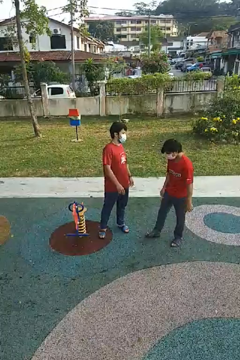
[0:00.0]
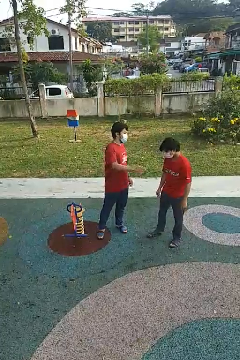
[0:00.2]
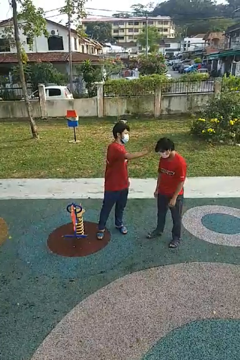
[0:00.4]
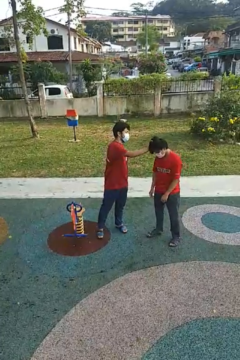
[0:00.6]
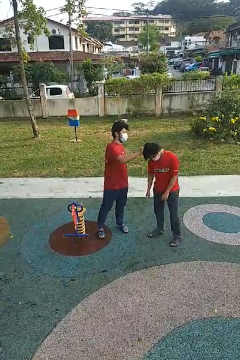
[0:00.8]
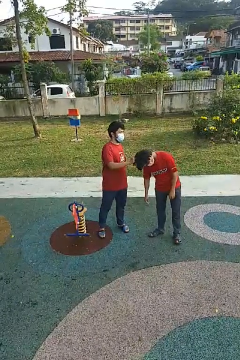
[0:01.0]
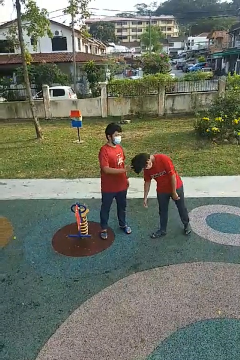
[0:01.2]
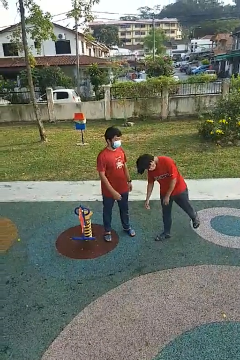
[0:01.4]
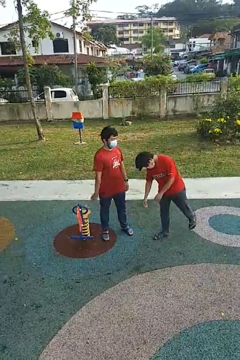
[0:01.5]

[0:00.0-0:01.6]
person grabs person by hair

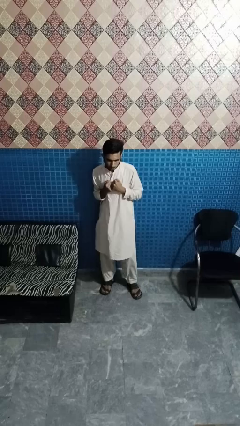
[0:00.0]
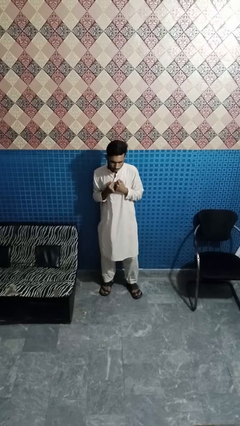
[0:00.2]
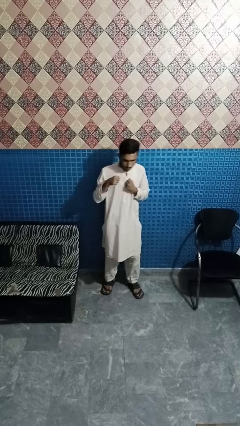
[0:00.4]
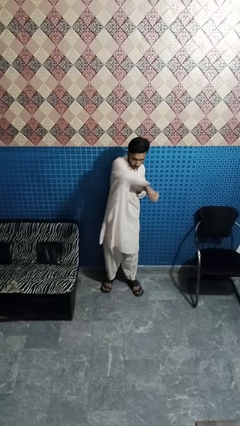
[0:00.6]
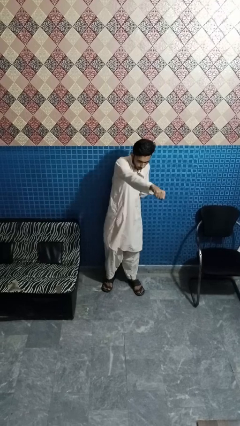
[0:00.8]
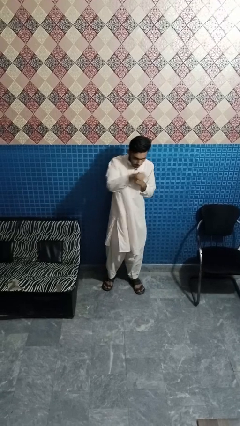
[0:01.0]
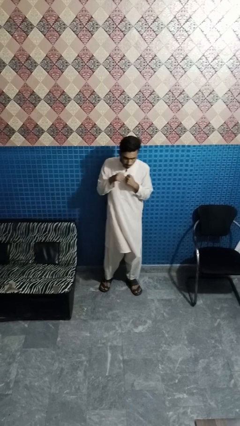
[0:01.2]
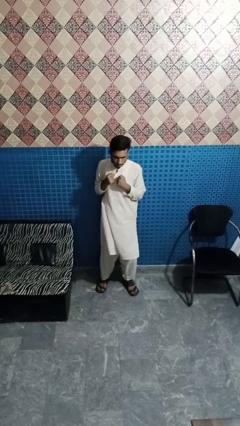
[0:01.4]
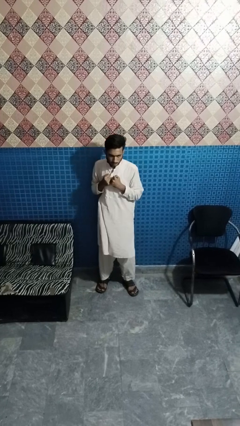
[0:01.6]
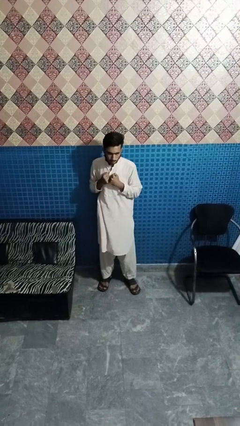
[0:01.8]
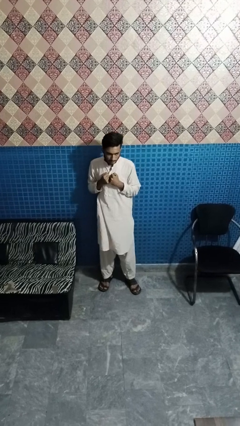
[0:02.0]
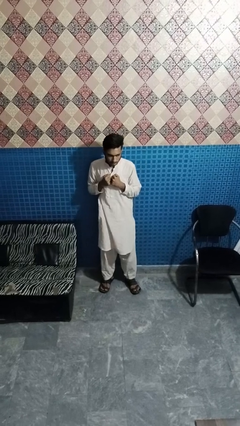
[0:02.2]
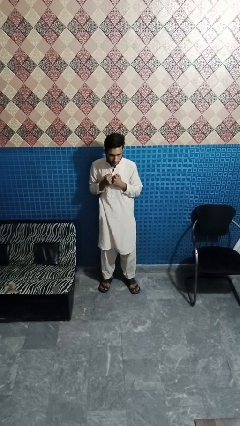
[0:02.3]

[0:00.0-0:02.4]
person punches

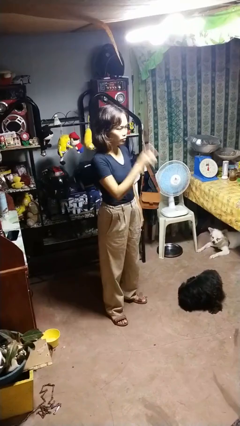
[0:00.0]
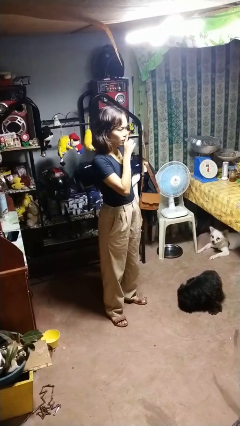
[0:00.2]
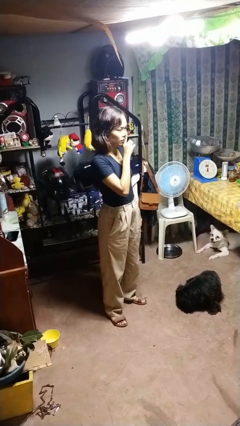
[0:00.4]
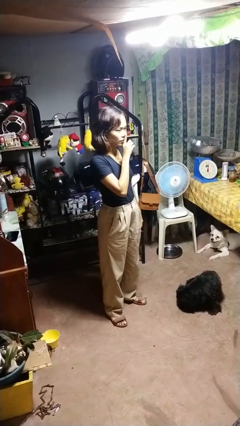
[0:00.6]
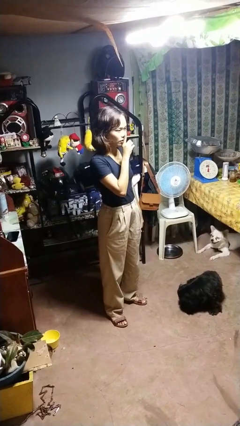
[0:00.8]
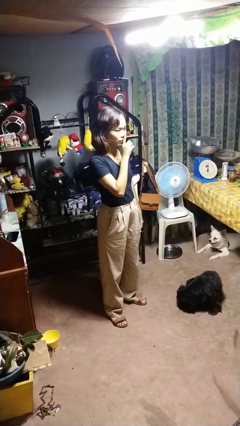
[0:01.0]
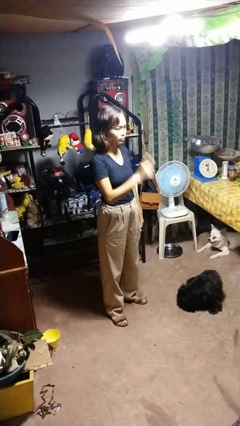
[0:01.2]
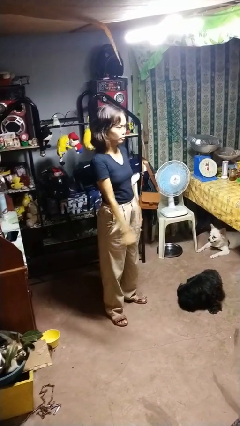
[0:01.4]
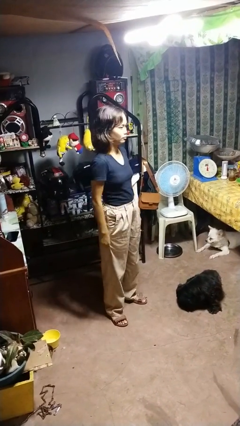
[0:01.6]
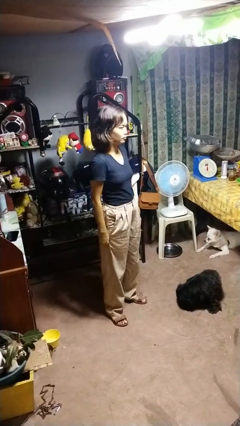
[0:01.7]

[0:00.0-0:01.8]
person gestures be quiet

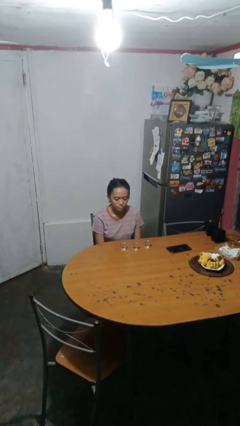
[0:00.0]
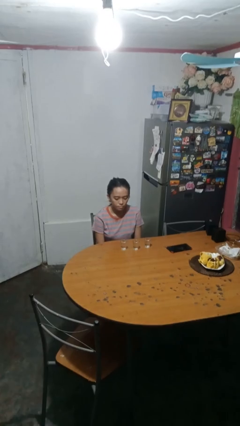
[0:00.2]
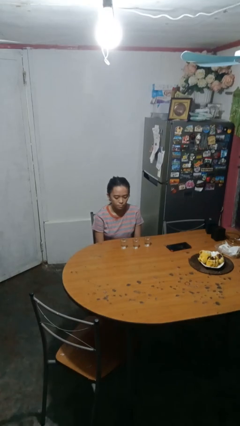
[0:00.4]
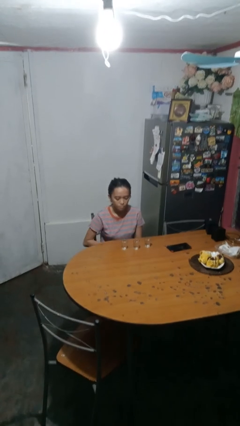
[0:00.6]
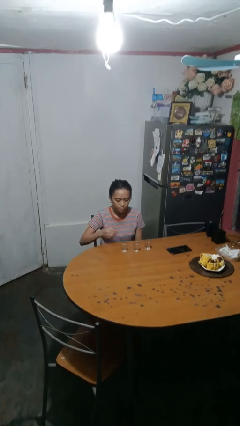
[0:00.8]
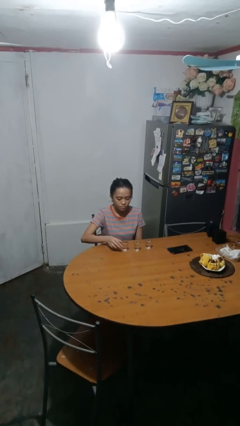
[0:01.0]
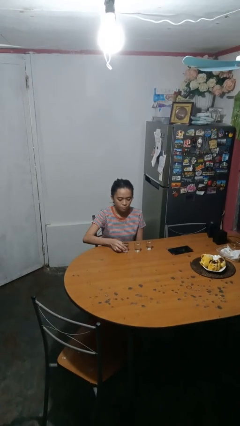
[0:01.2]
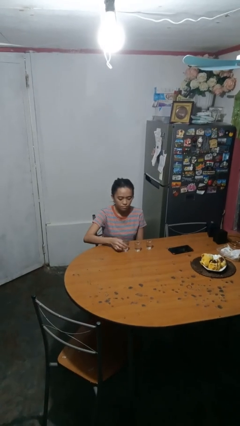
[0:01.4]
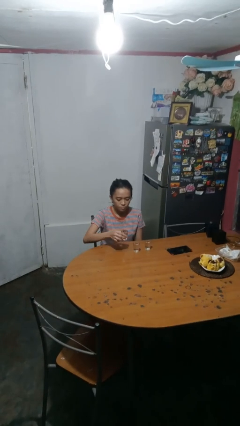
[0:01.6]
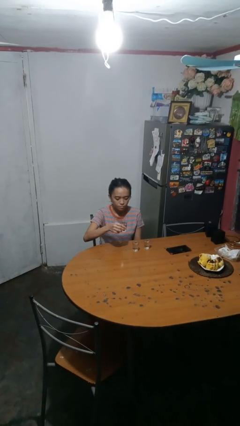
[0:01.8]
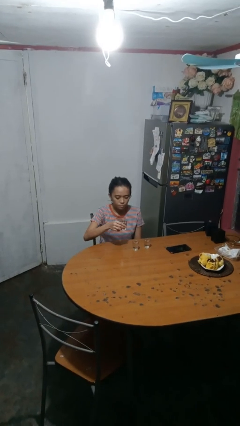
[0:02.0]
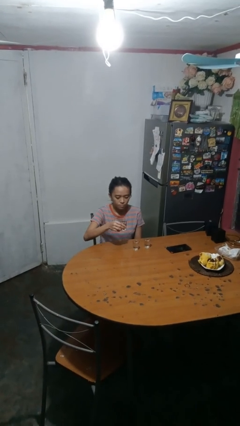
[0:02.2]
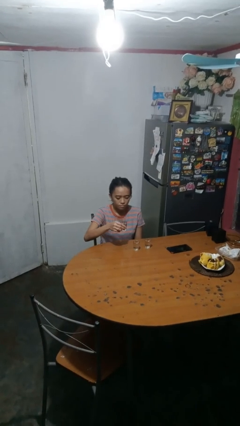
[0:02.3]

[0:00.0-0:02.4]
person picks up object from table

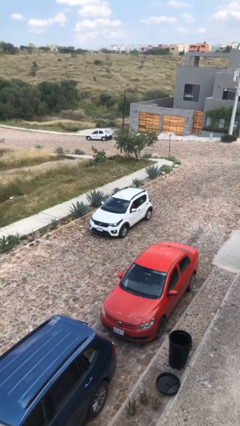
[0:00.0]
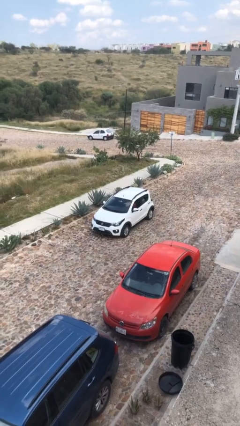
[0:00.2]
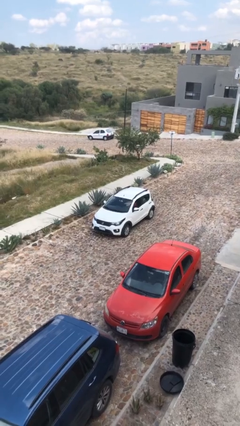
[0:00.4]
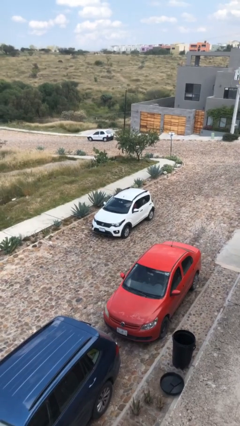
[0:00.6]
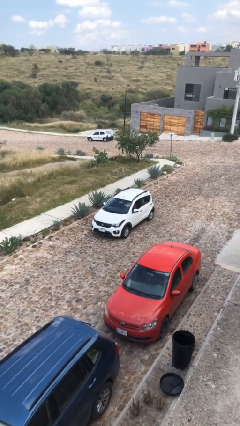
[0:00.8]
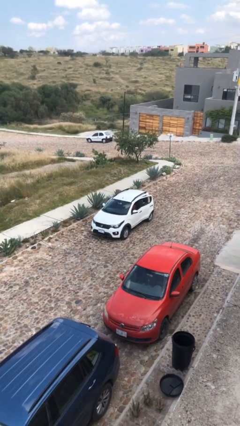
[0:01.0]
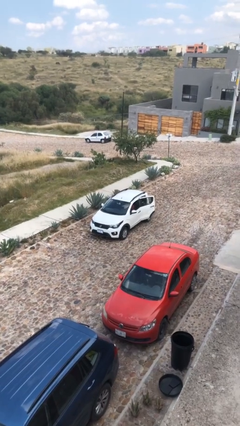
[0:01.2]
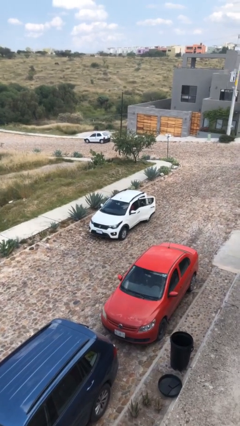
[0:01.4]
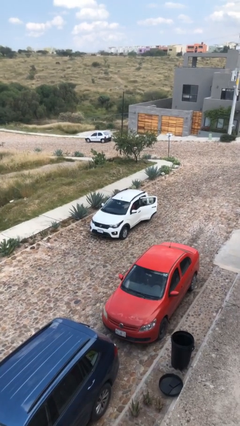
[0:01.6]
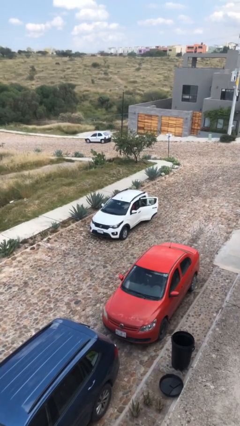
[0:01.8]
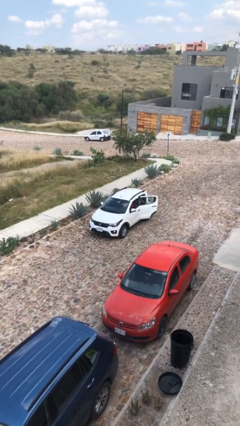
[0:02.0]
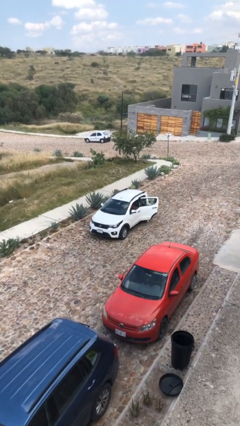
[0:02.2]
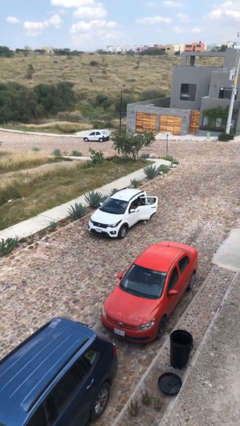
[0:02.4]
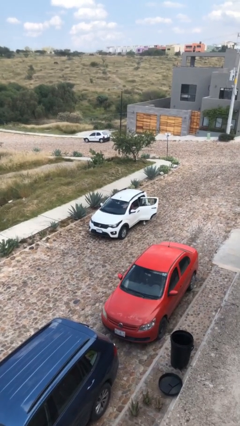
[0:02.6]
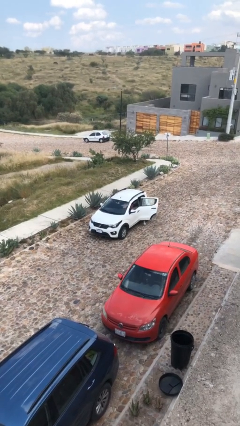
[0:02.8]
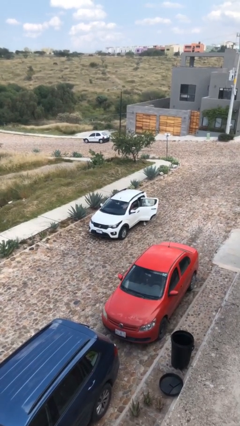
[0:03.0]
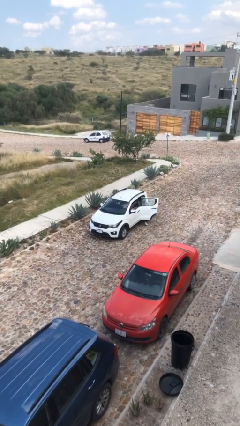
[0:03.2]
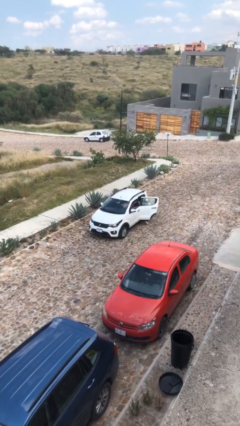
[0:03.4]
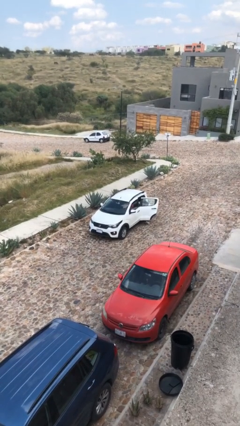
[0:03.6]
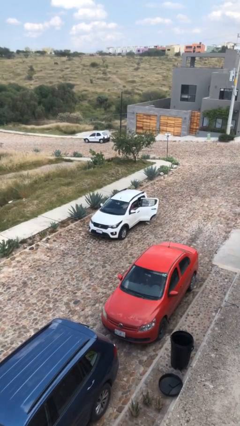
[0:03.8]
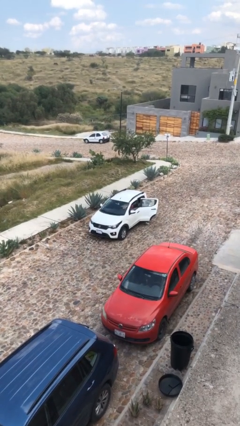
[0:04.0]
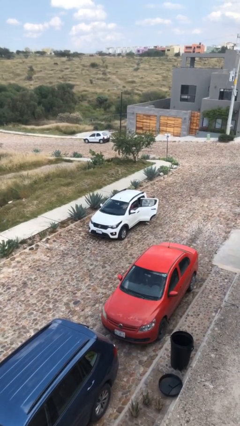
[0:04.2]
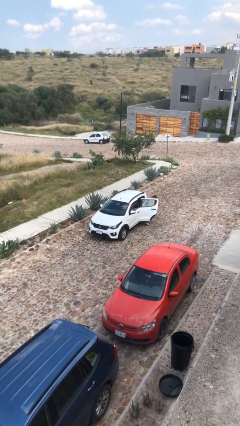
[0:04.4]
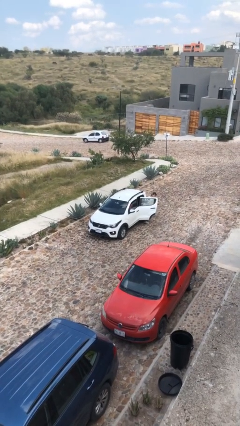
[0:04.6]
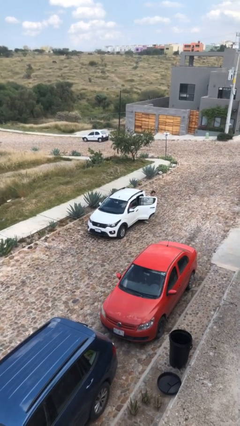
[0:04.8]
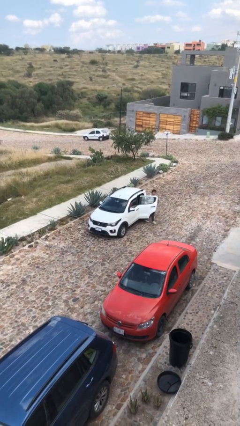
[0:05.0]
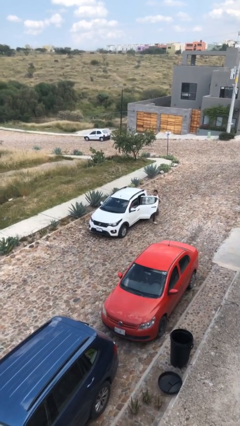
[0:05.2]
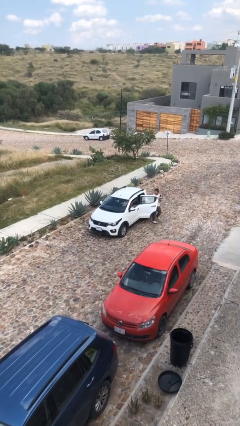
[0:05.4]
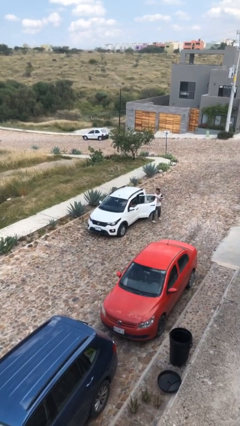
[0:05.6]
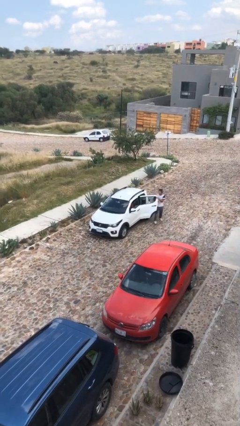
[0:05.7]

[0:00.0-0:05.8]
car drops off person

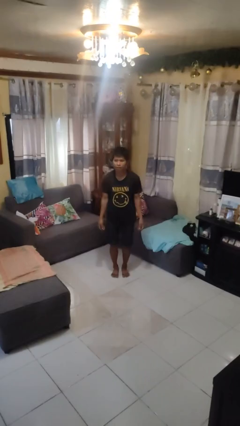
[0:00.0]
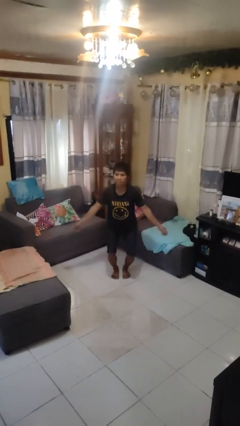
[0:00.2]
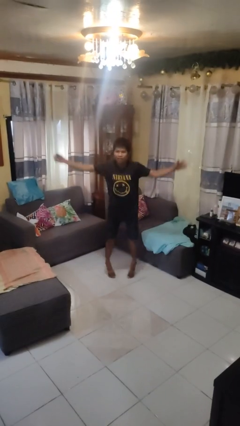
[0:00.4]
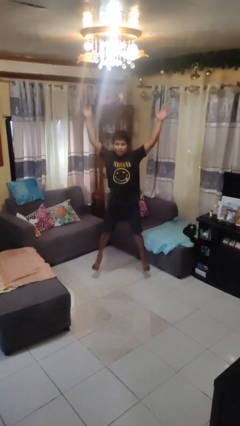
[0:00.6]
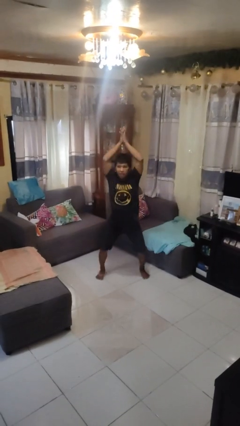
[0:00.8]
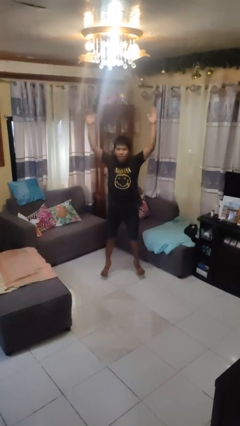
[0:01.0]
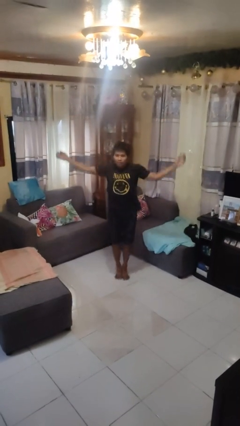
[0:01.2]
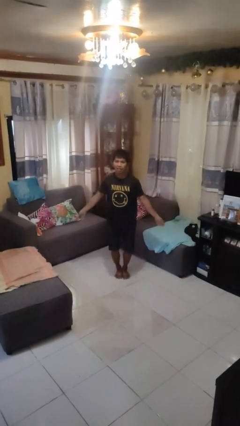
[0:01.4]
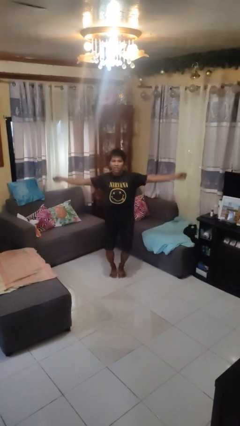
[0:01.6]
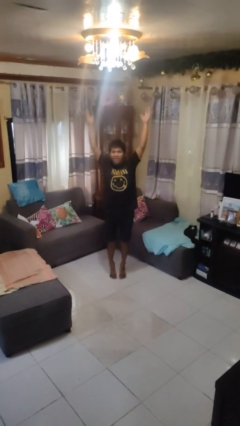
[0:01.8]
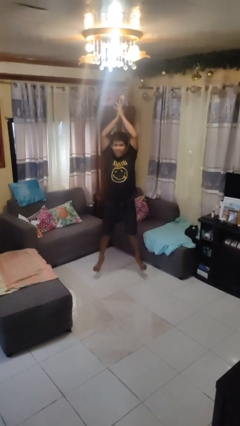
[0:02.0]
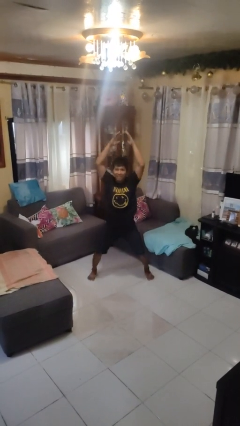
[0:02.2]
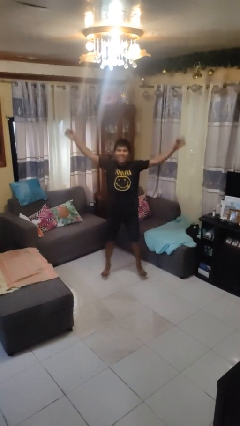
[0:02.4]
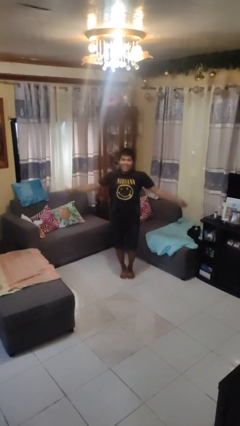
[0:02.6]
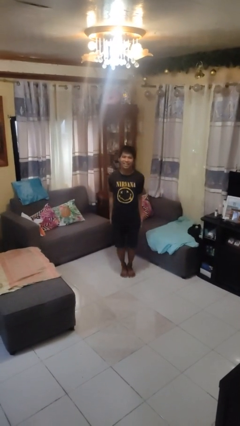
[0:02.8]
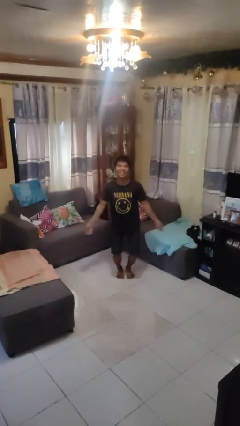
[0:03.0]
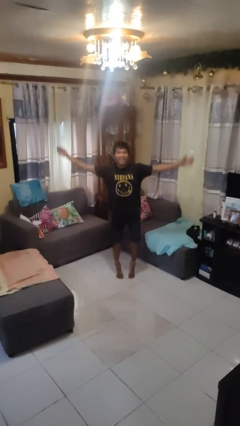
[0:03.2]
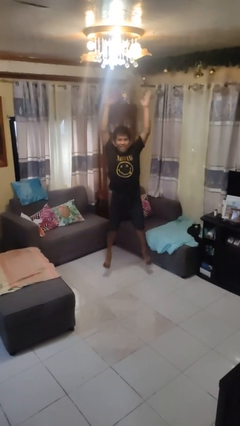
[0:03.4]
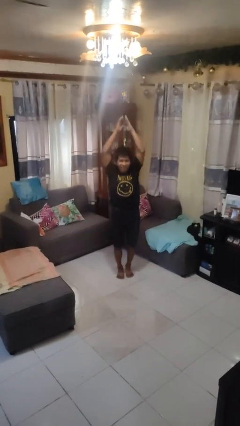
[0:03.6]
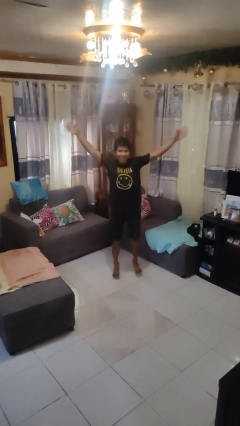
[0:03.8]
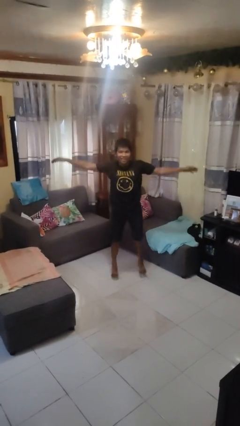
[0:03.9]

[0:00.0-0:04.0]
person exercises with jumping jacks
